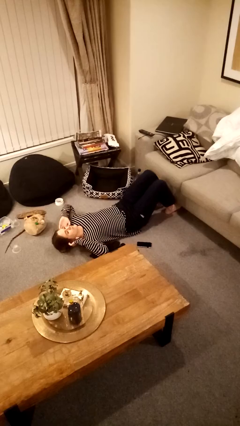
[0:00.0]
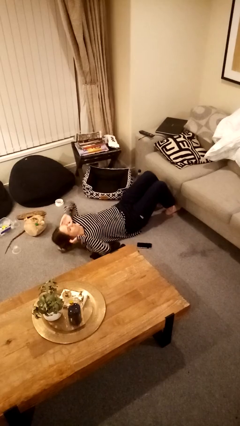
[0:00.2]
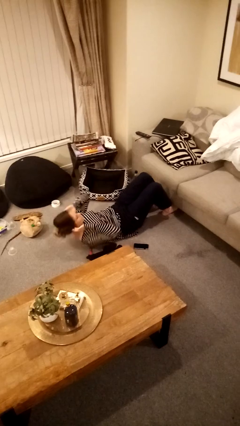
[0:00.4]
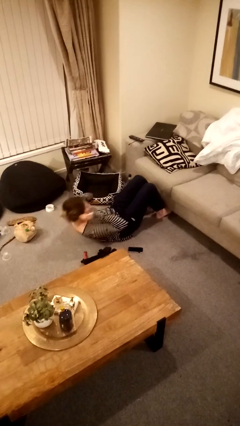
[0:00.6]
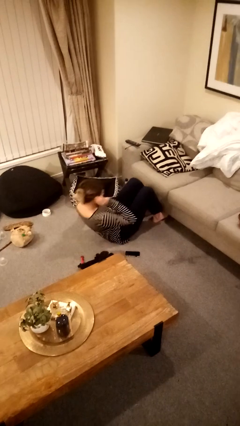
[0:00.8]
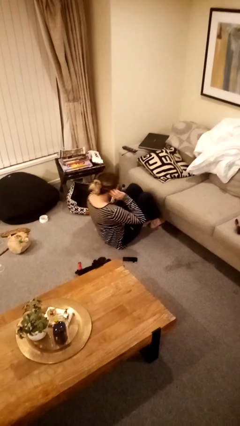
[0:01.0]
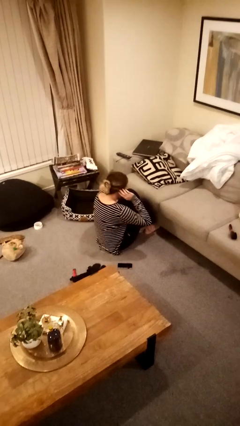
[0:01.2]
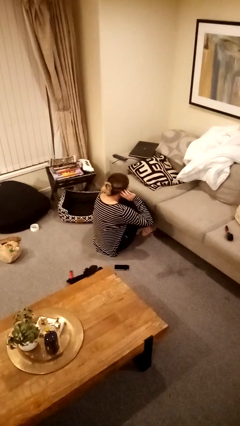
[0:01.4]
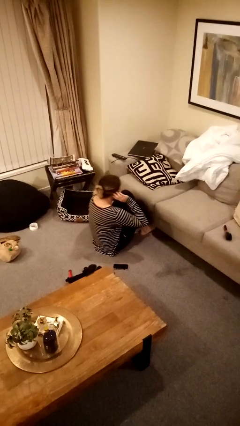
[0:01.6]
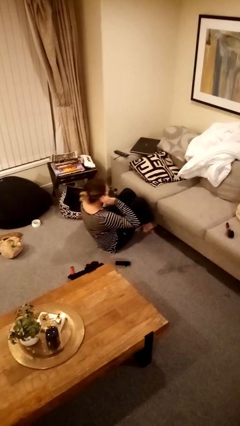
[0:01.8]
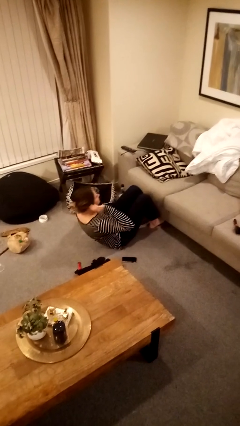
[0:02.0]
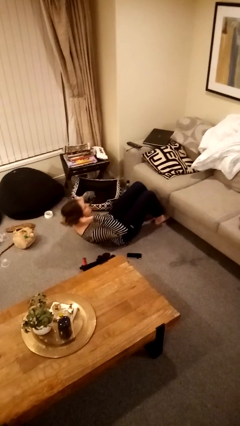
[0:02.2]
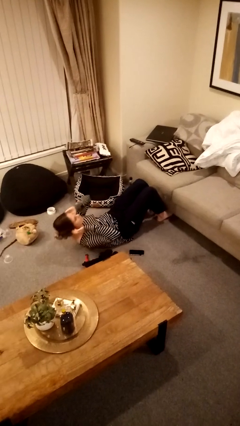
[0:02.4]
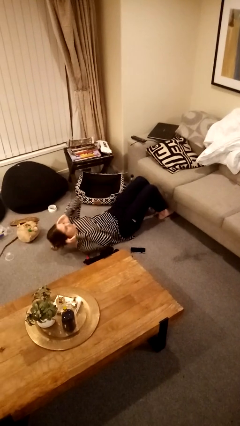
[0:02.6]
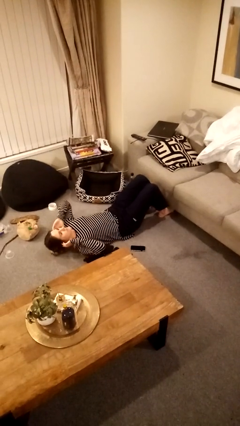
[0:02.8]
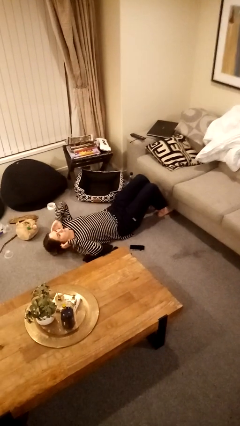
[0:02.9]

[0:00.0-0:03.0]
person exercises with situp

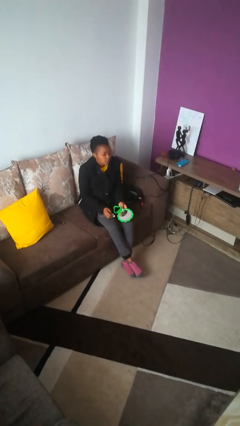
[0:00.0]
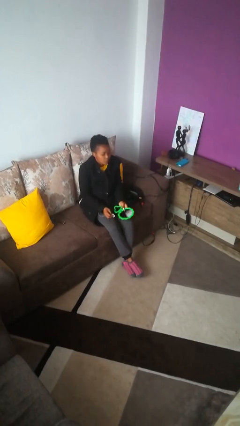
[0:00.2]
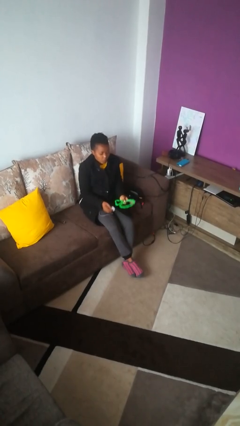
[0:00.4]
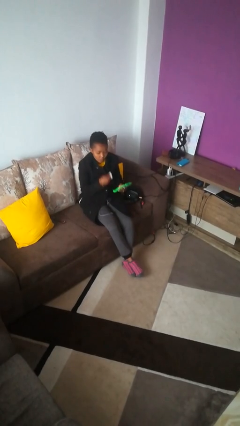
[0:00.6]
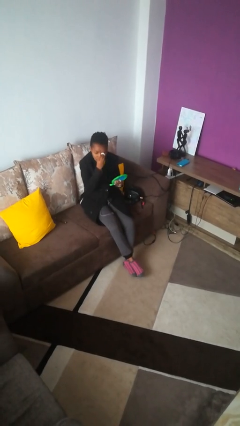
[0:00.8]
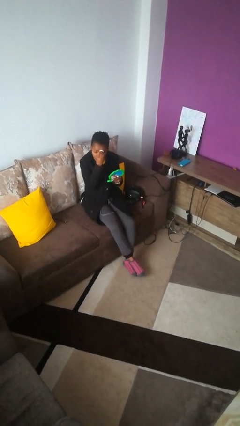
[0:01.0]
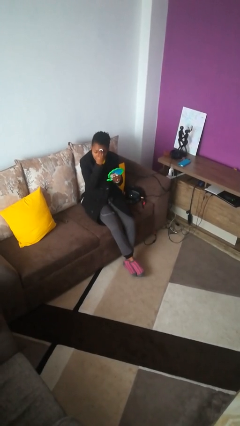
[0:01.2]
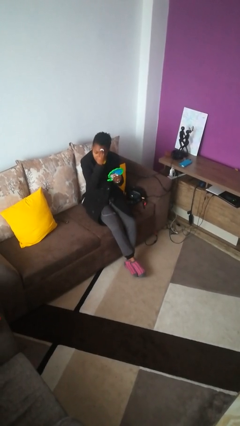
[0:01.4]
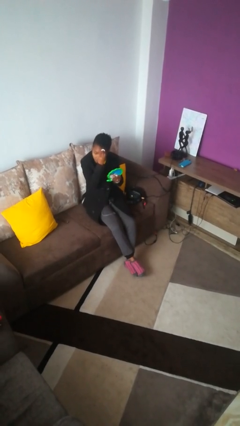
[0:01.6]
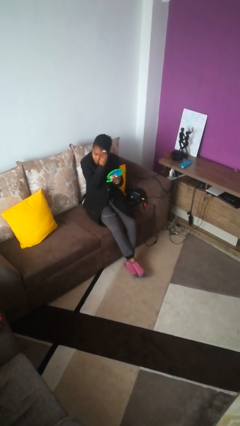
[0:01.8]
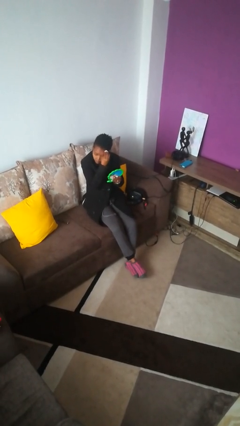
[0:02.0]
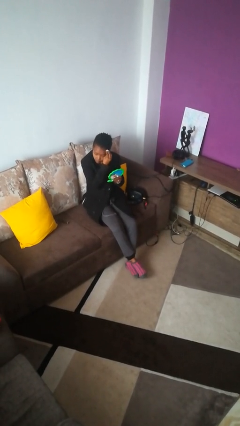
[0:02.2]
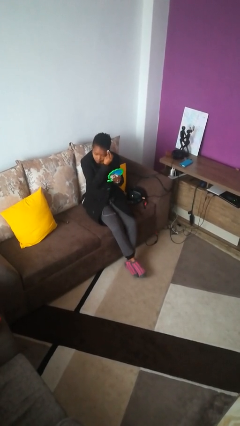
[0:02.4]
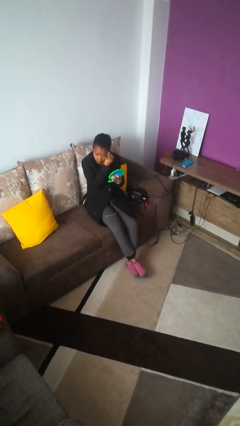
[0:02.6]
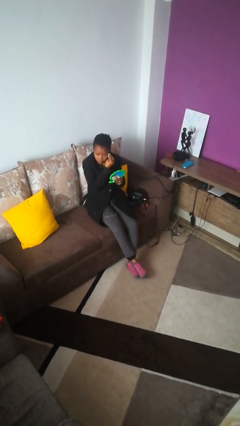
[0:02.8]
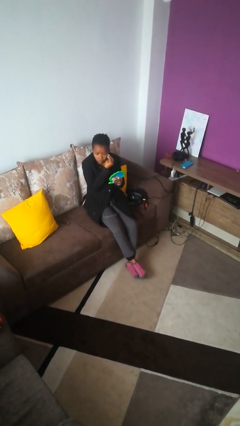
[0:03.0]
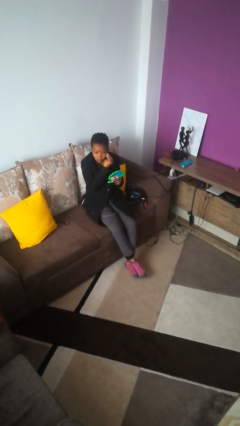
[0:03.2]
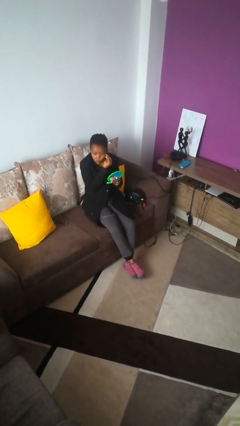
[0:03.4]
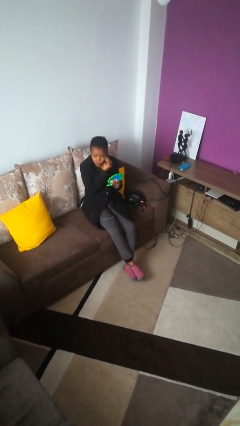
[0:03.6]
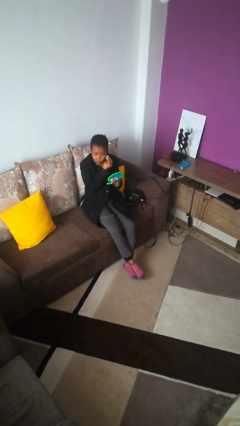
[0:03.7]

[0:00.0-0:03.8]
person applies foundation makeup

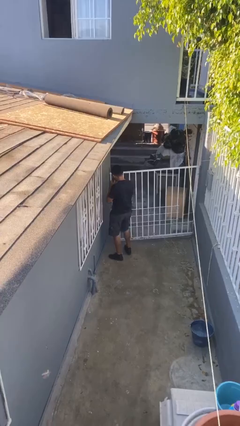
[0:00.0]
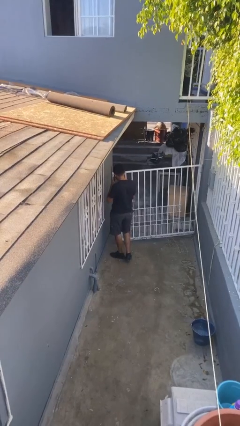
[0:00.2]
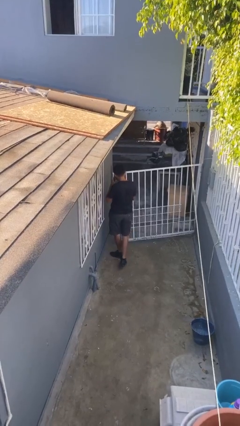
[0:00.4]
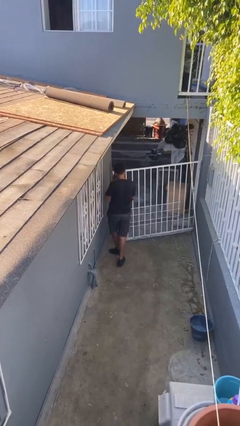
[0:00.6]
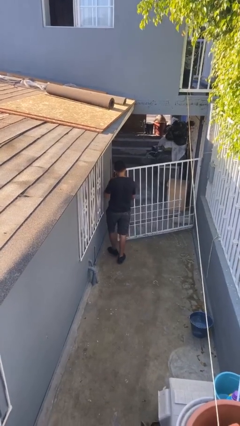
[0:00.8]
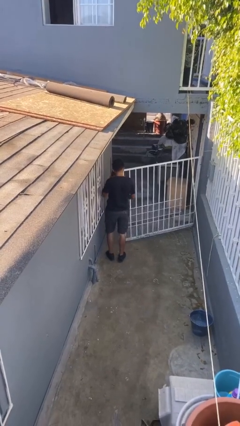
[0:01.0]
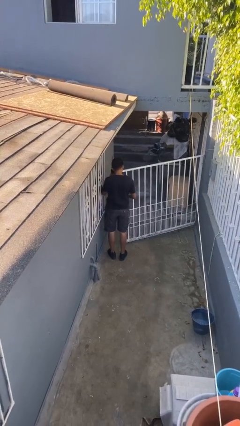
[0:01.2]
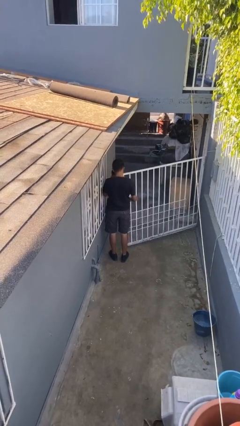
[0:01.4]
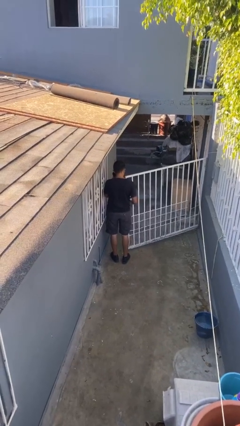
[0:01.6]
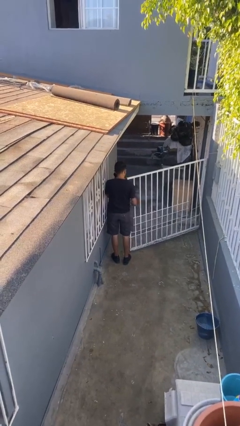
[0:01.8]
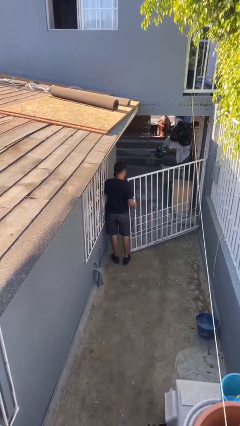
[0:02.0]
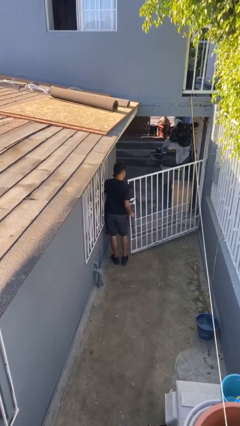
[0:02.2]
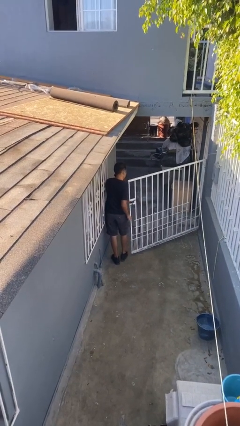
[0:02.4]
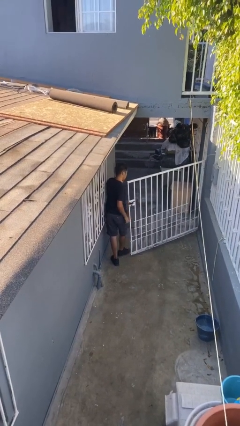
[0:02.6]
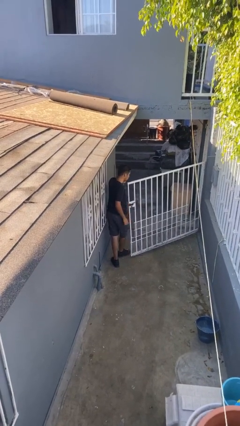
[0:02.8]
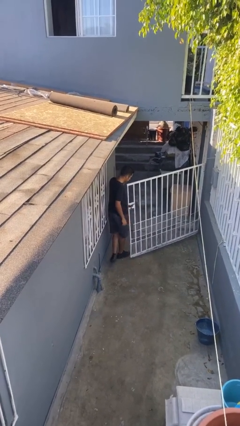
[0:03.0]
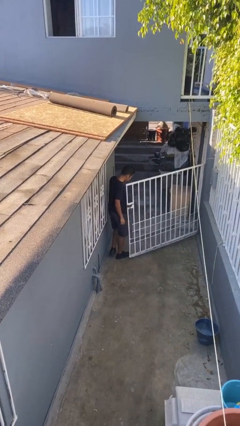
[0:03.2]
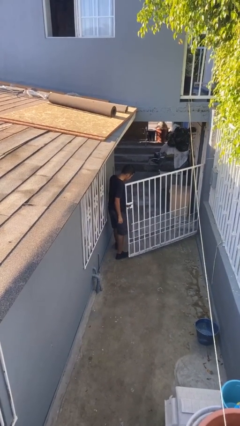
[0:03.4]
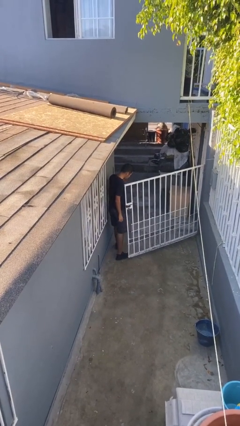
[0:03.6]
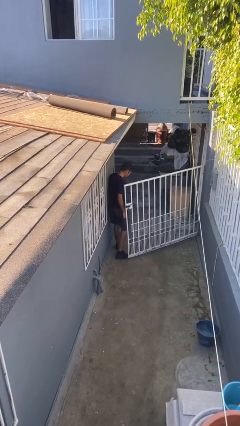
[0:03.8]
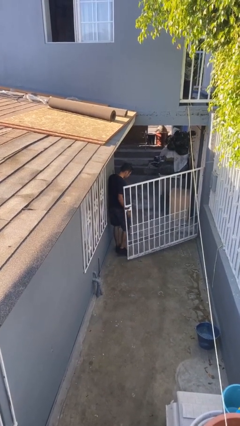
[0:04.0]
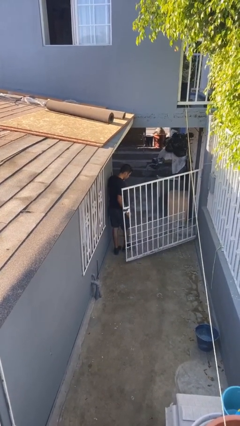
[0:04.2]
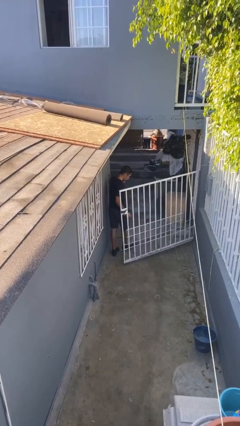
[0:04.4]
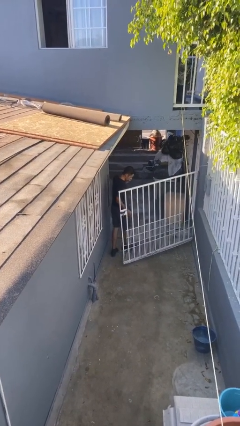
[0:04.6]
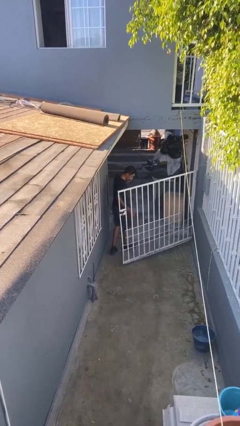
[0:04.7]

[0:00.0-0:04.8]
person exits scene through structure

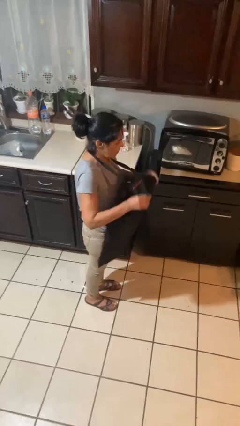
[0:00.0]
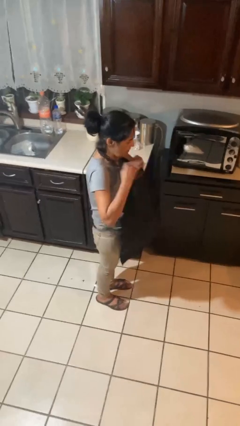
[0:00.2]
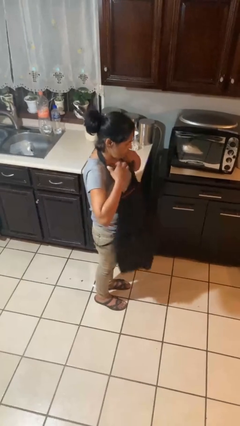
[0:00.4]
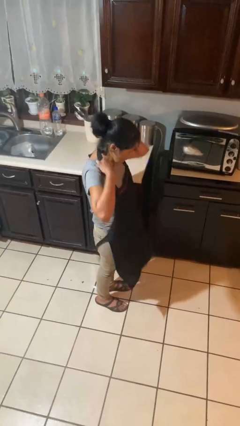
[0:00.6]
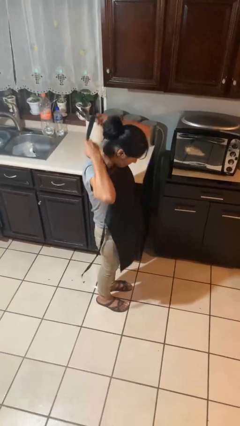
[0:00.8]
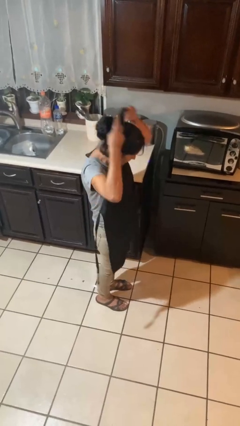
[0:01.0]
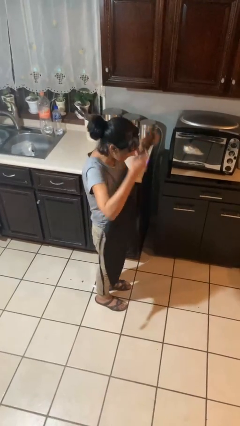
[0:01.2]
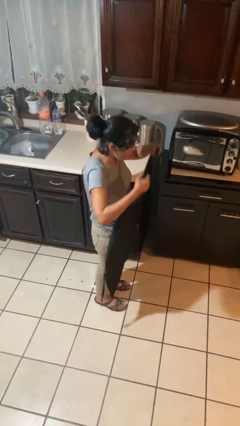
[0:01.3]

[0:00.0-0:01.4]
person takes off apron

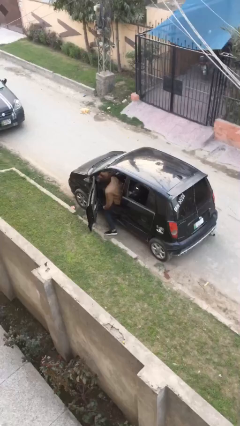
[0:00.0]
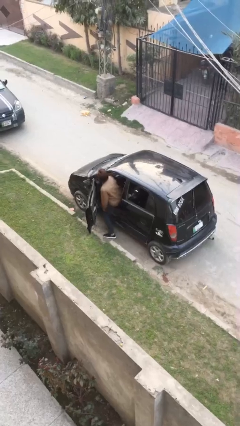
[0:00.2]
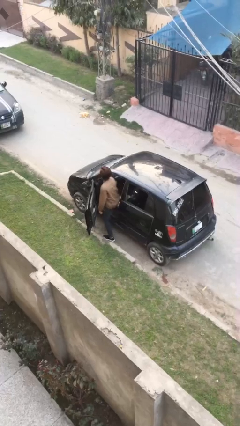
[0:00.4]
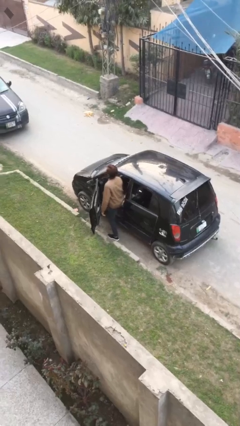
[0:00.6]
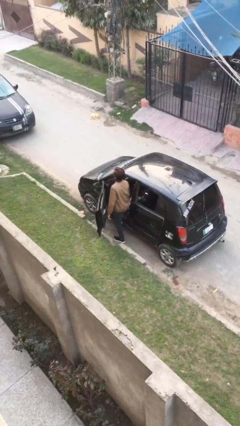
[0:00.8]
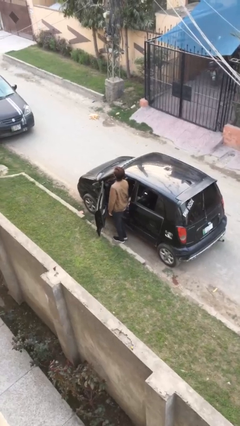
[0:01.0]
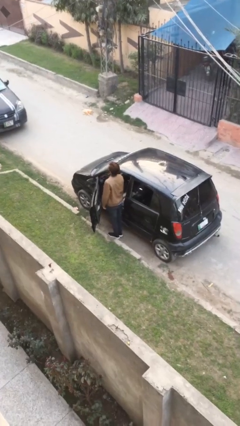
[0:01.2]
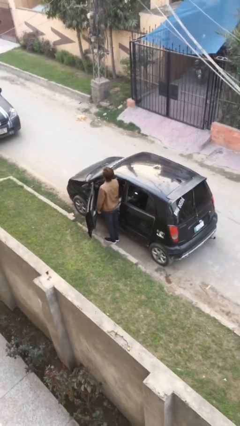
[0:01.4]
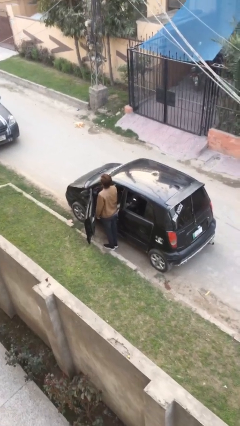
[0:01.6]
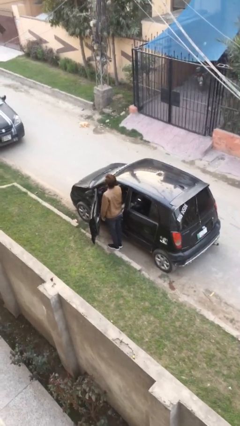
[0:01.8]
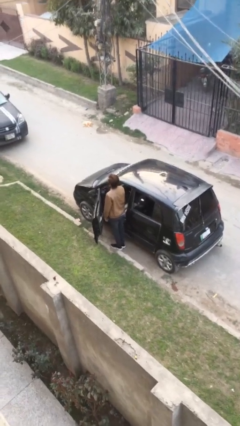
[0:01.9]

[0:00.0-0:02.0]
person exits car

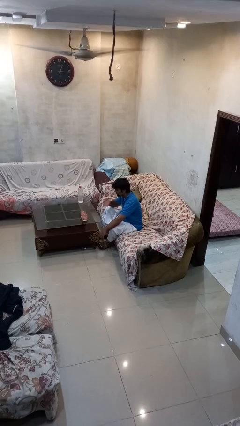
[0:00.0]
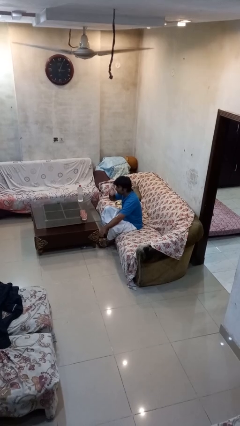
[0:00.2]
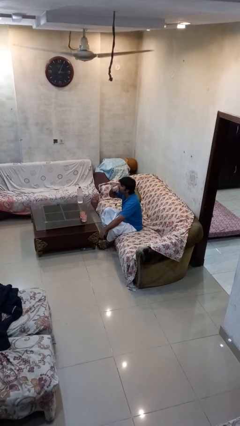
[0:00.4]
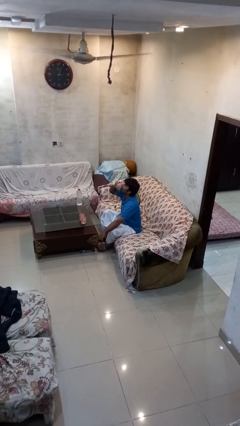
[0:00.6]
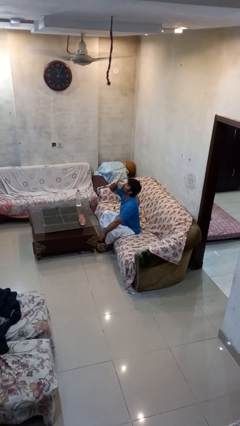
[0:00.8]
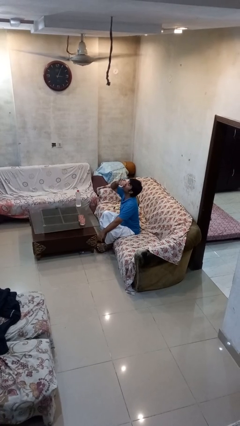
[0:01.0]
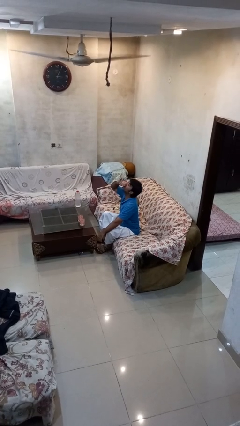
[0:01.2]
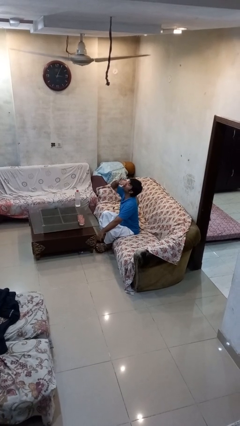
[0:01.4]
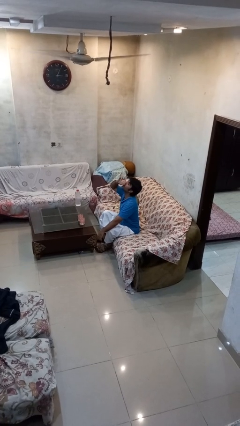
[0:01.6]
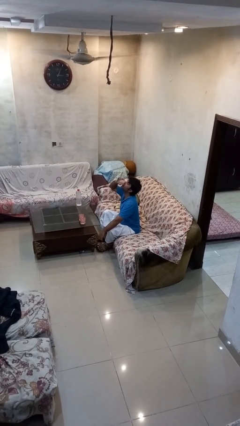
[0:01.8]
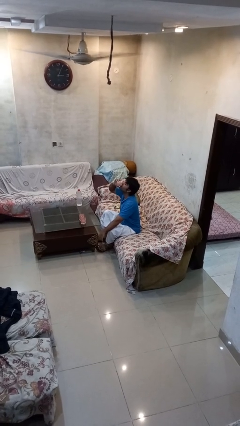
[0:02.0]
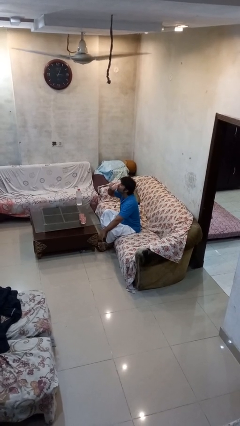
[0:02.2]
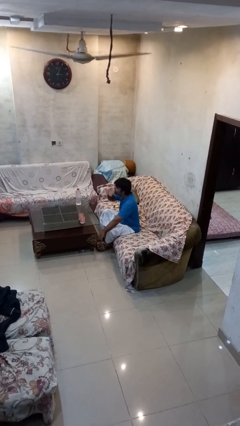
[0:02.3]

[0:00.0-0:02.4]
person drinks from shotglass
